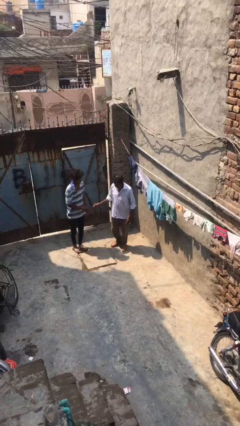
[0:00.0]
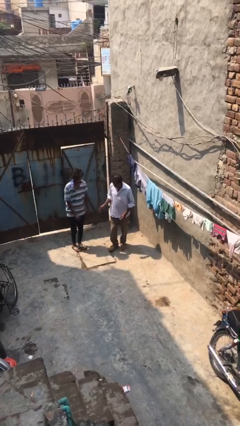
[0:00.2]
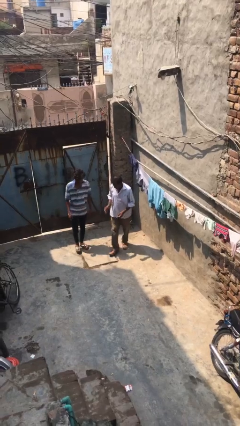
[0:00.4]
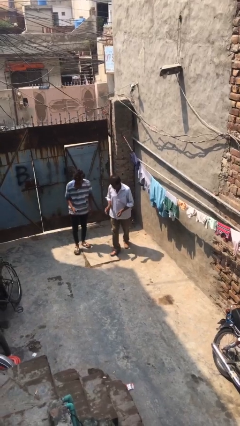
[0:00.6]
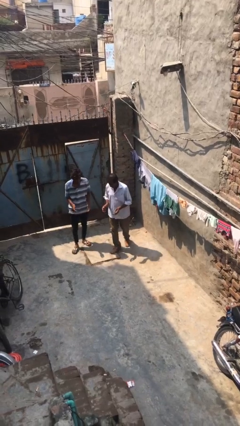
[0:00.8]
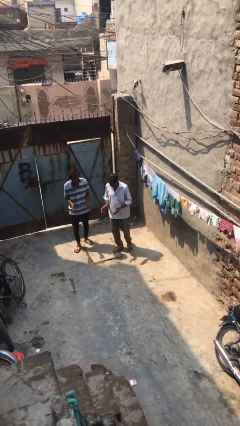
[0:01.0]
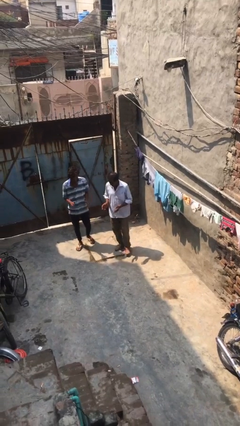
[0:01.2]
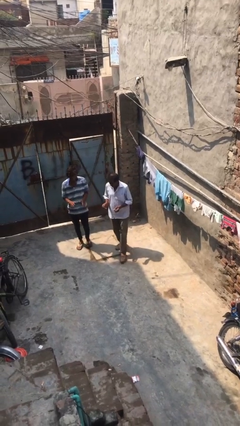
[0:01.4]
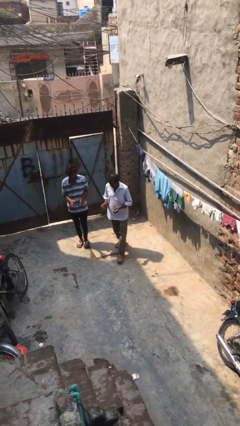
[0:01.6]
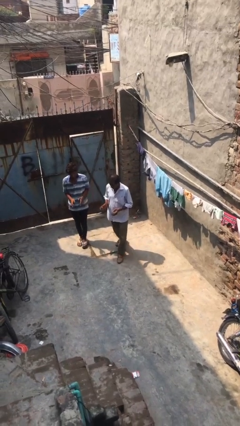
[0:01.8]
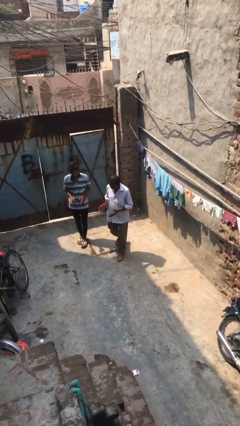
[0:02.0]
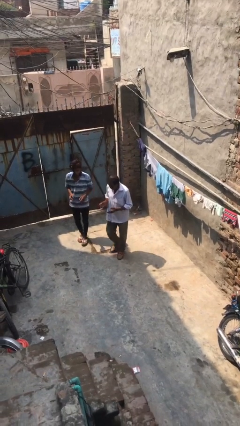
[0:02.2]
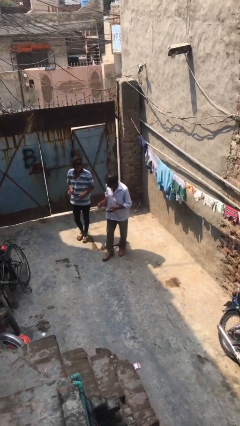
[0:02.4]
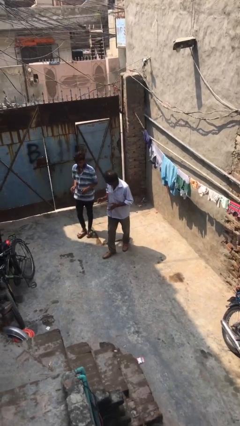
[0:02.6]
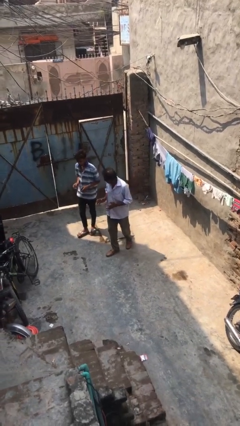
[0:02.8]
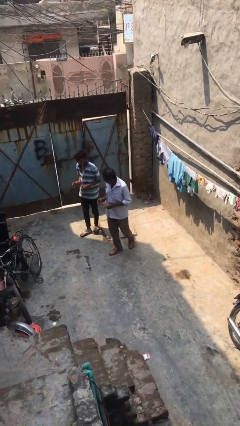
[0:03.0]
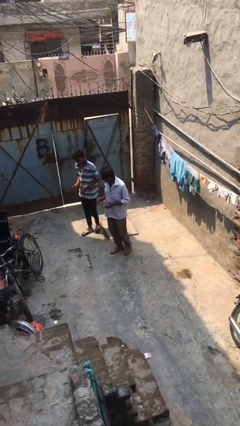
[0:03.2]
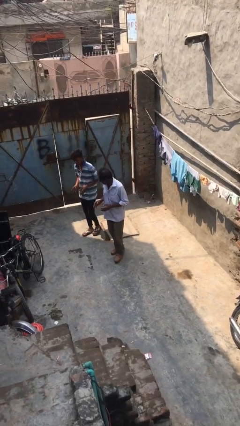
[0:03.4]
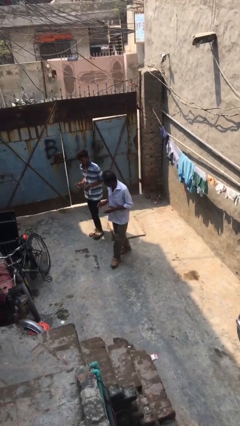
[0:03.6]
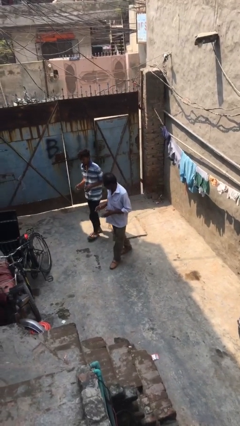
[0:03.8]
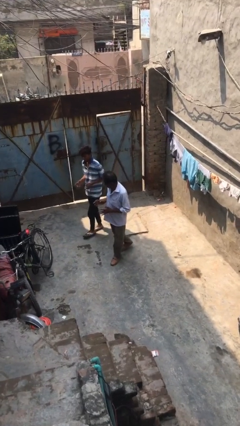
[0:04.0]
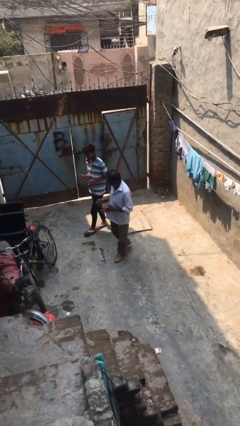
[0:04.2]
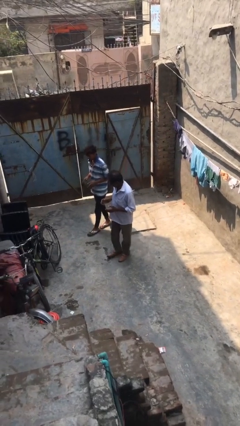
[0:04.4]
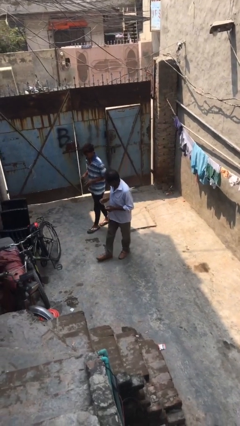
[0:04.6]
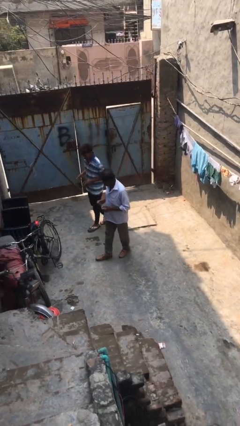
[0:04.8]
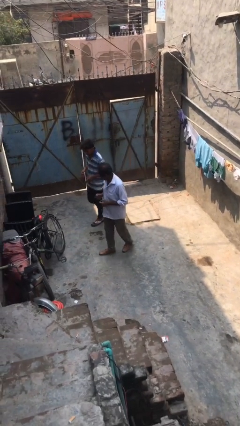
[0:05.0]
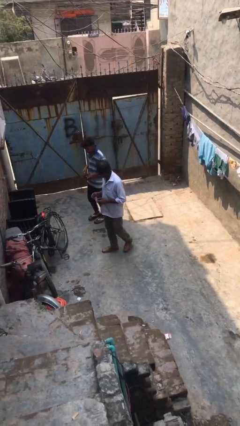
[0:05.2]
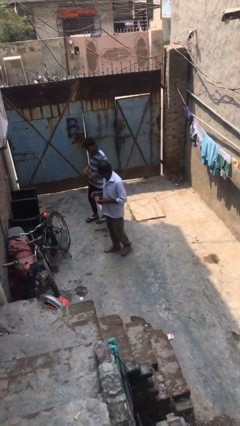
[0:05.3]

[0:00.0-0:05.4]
person talks to person

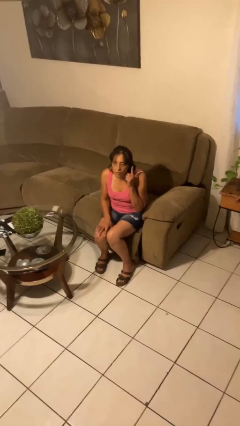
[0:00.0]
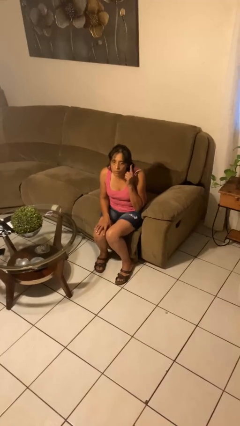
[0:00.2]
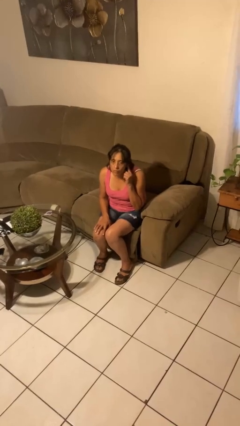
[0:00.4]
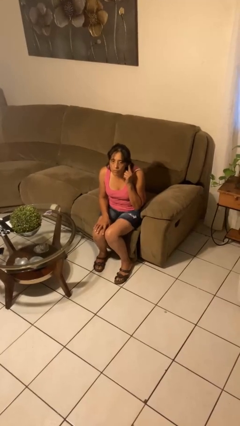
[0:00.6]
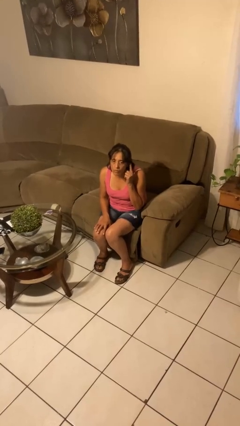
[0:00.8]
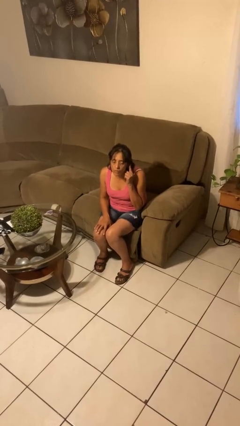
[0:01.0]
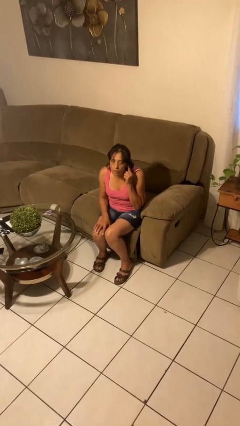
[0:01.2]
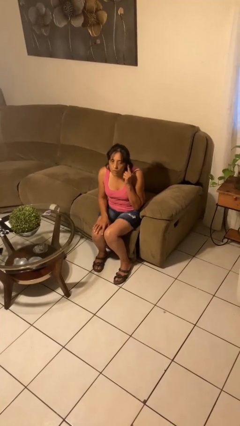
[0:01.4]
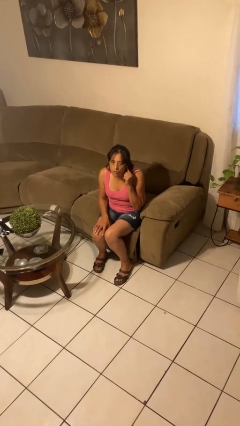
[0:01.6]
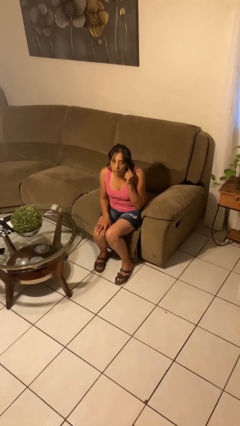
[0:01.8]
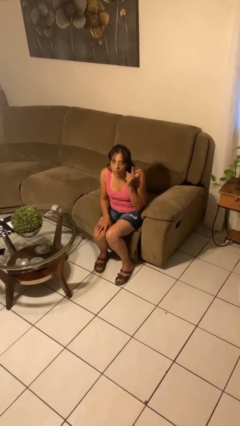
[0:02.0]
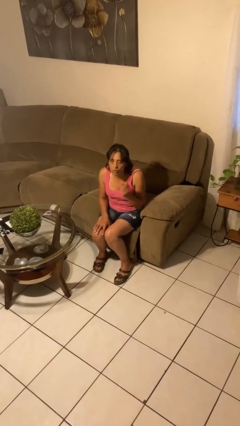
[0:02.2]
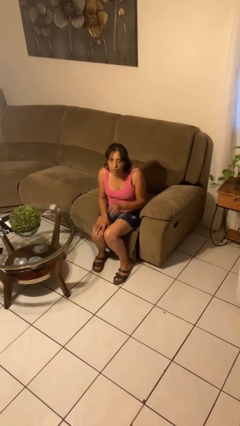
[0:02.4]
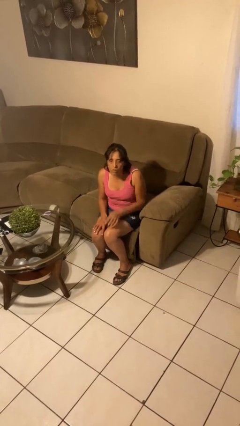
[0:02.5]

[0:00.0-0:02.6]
person gestures listen closely

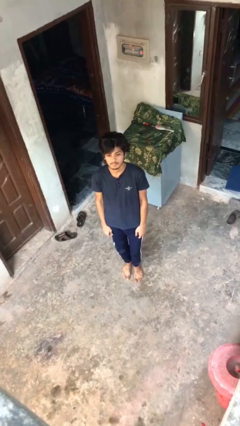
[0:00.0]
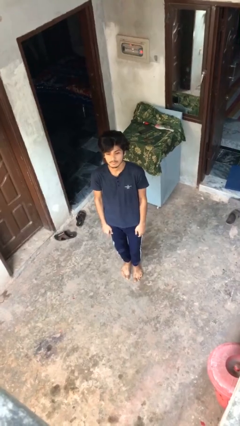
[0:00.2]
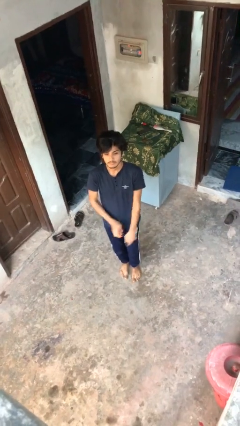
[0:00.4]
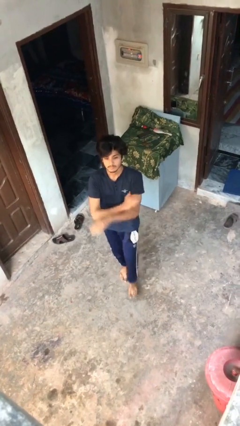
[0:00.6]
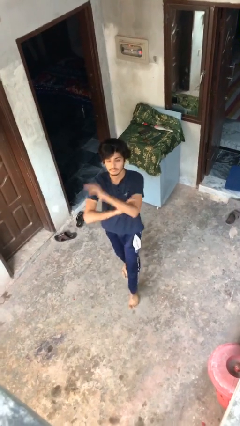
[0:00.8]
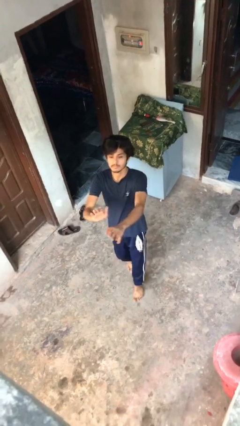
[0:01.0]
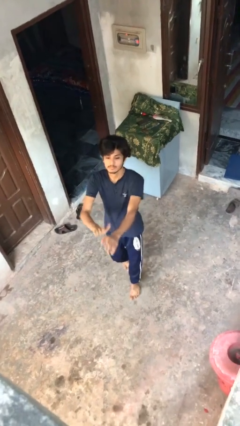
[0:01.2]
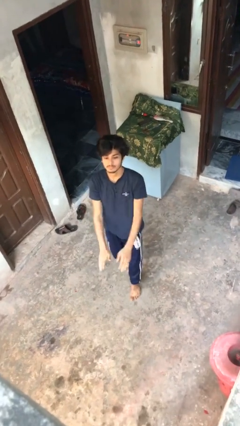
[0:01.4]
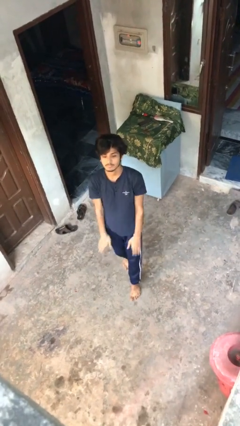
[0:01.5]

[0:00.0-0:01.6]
person karate chop

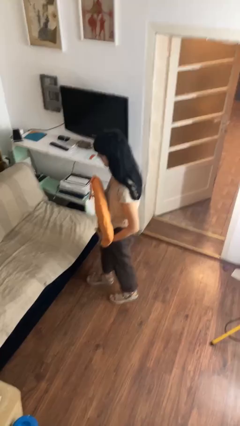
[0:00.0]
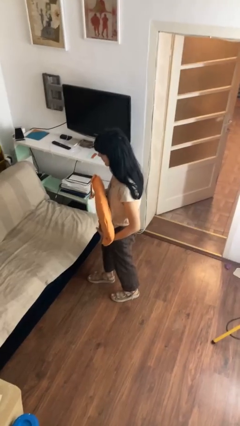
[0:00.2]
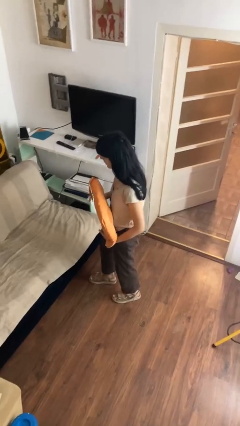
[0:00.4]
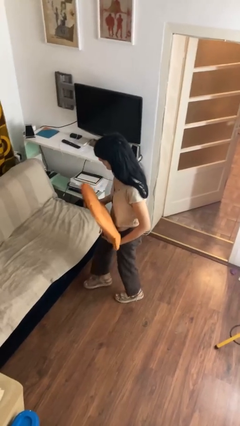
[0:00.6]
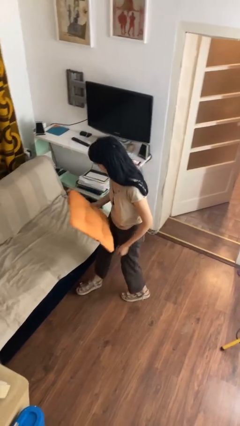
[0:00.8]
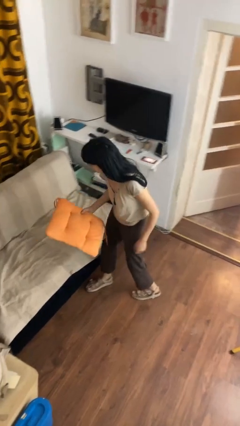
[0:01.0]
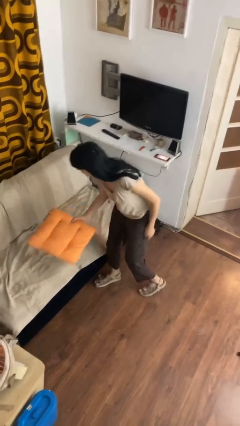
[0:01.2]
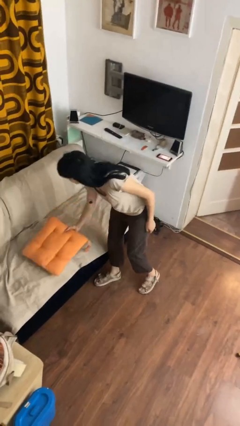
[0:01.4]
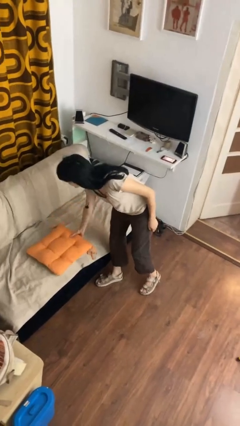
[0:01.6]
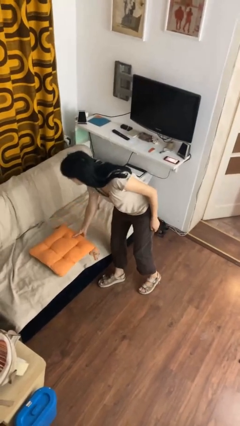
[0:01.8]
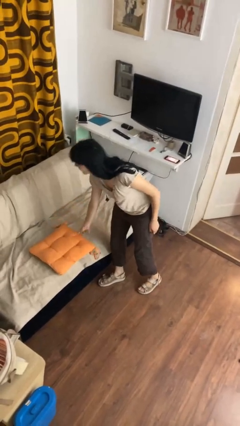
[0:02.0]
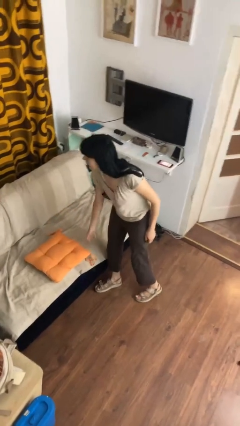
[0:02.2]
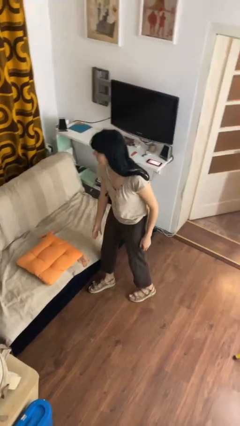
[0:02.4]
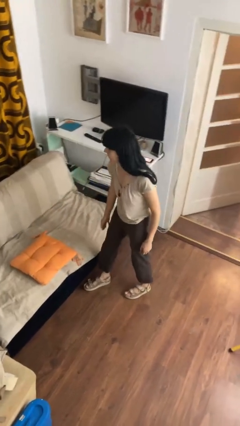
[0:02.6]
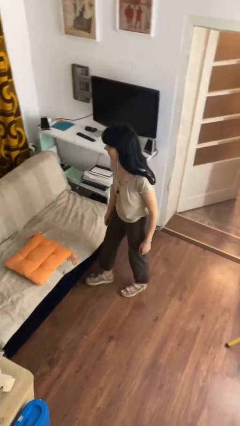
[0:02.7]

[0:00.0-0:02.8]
person puts down object on couch

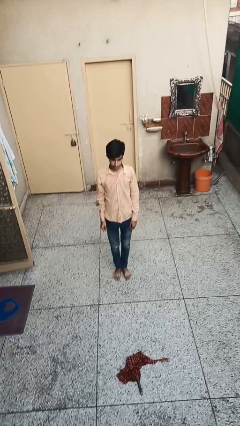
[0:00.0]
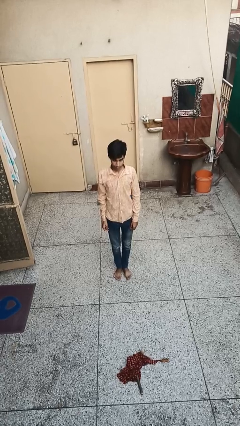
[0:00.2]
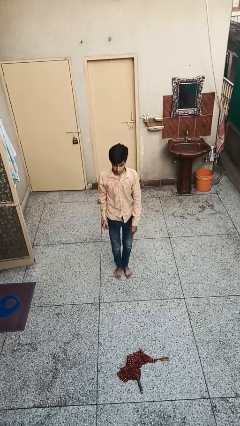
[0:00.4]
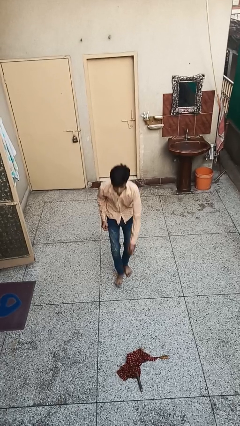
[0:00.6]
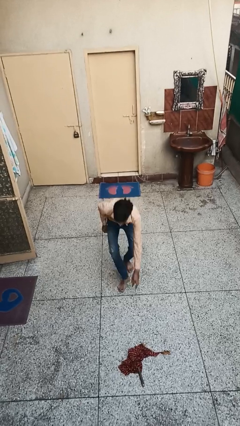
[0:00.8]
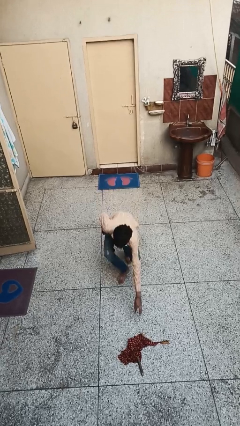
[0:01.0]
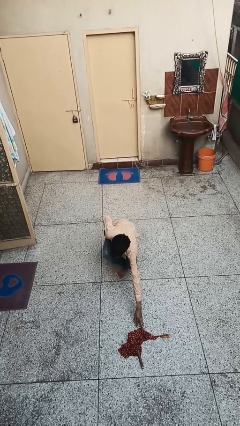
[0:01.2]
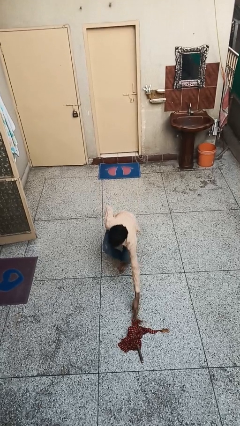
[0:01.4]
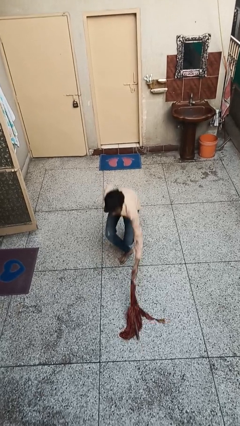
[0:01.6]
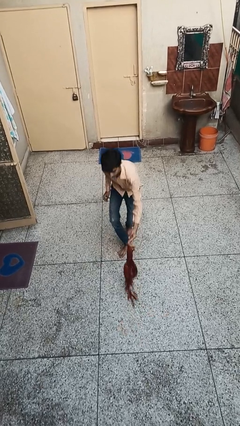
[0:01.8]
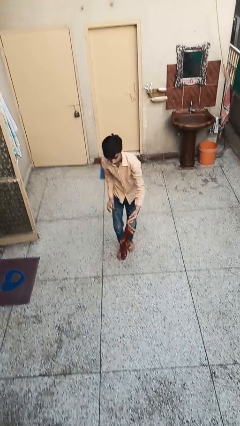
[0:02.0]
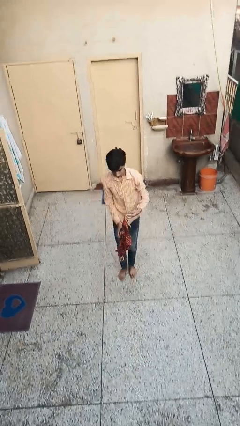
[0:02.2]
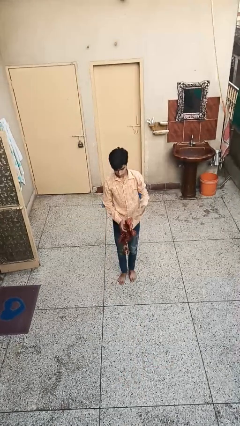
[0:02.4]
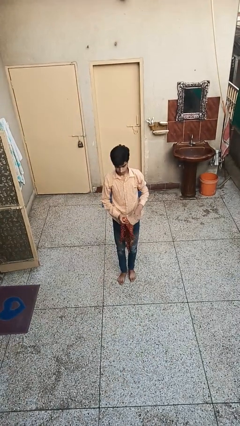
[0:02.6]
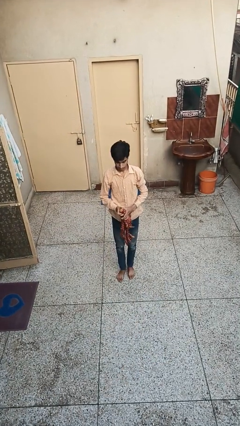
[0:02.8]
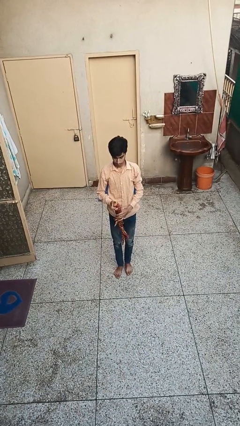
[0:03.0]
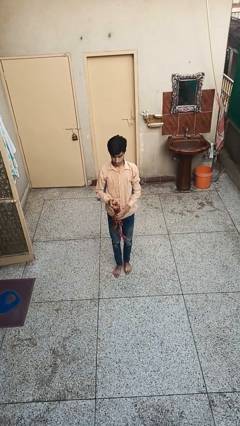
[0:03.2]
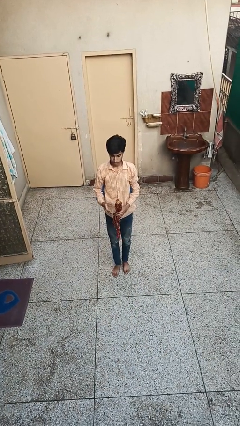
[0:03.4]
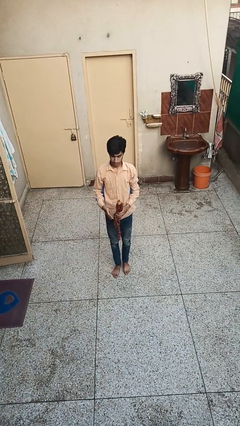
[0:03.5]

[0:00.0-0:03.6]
person picks up object from floor

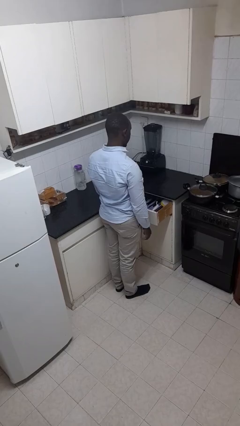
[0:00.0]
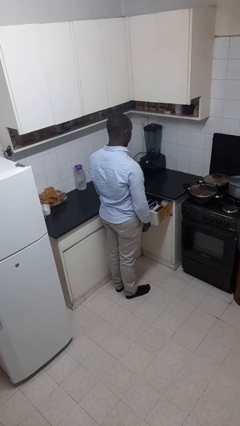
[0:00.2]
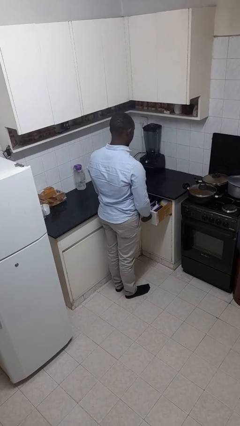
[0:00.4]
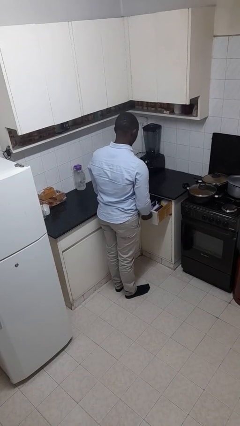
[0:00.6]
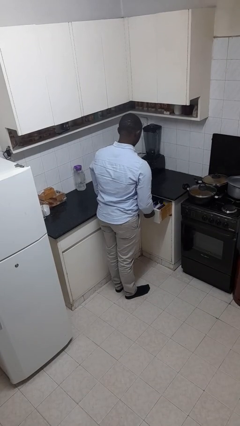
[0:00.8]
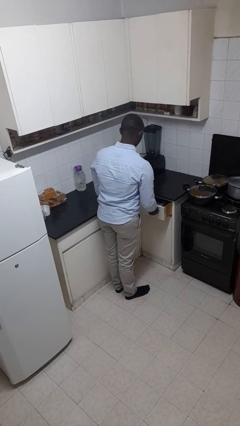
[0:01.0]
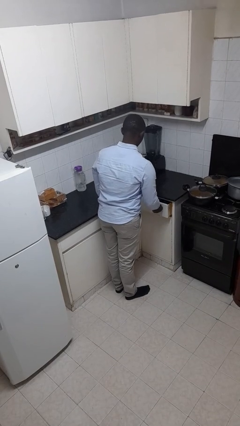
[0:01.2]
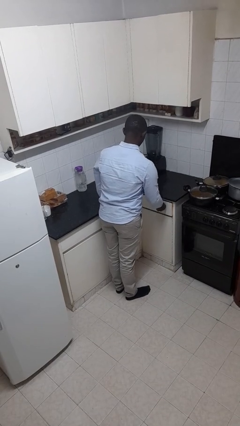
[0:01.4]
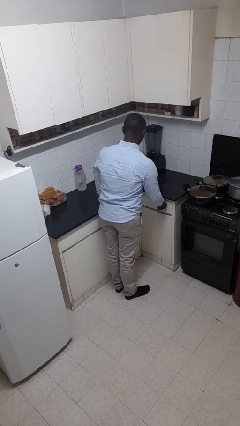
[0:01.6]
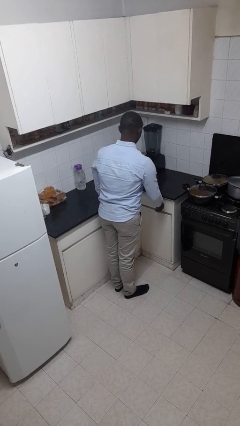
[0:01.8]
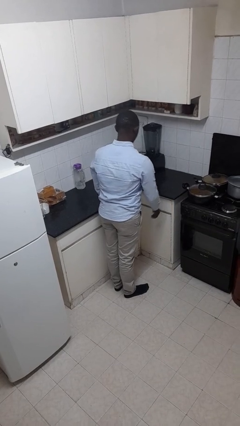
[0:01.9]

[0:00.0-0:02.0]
person closes kitchen drawer
